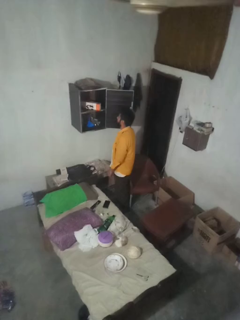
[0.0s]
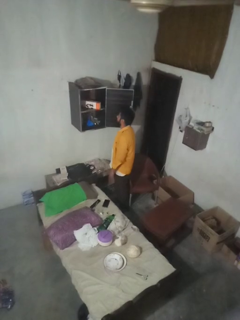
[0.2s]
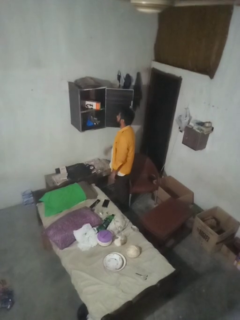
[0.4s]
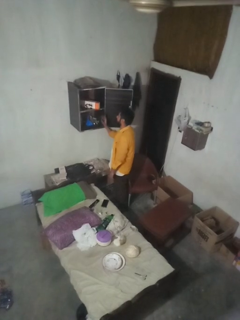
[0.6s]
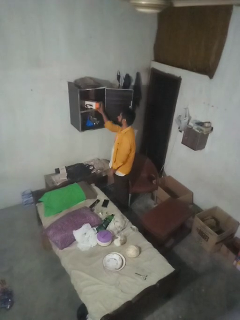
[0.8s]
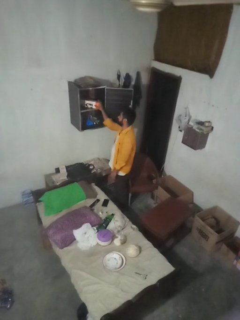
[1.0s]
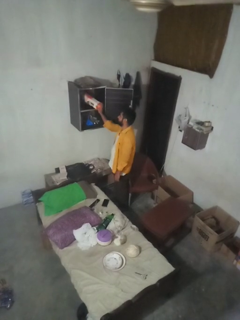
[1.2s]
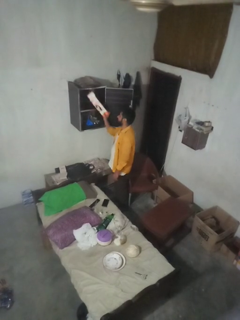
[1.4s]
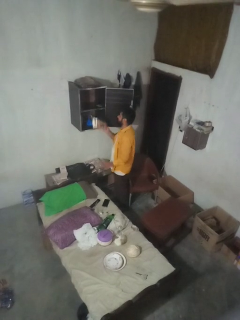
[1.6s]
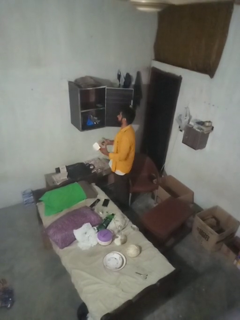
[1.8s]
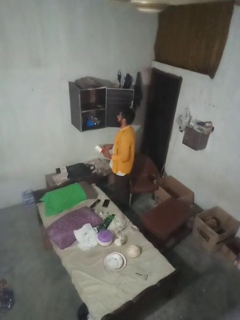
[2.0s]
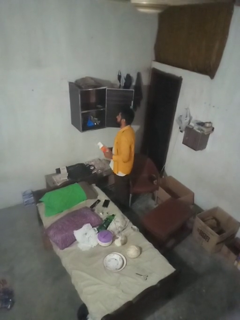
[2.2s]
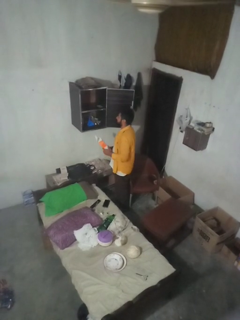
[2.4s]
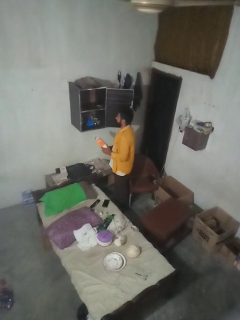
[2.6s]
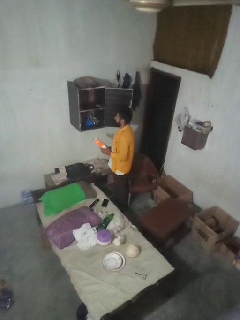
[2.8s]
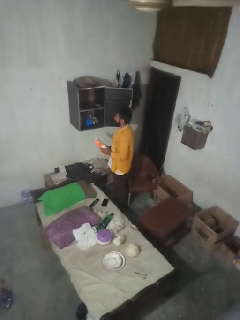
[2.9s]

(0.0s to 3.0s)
person picks up object from cabinet

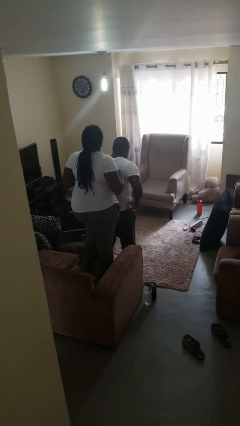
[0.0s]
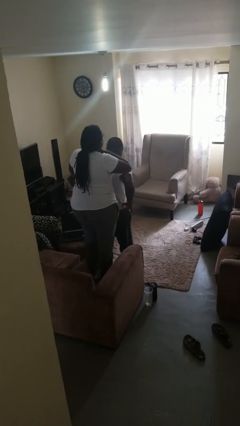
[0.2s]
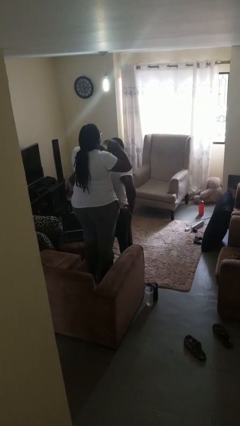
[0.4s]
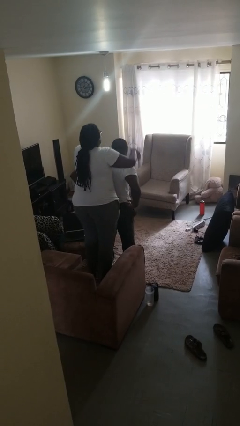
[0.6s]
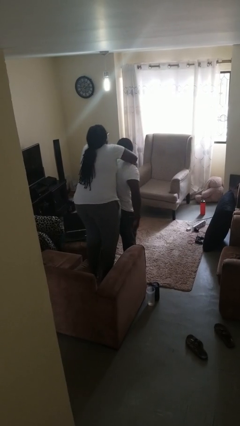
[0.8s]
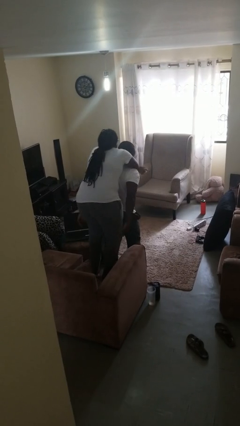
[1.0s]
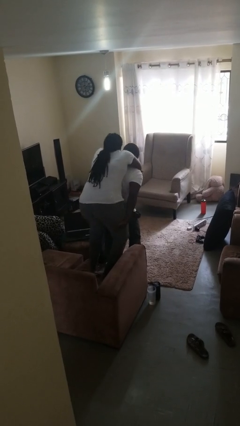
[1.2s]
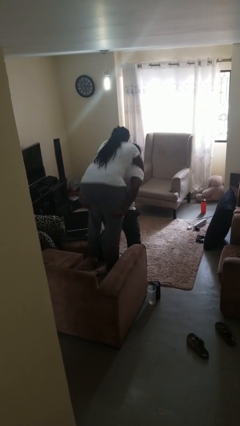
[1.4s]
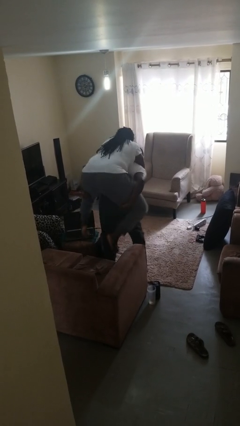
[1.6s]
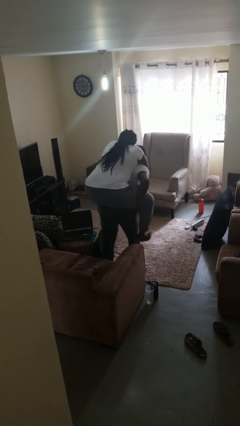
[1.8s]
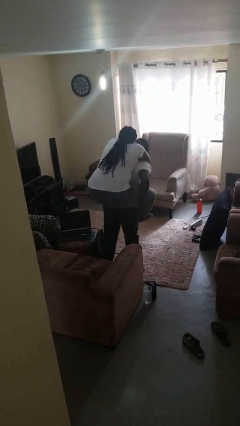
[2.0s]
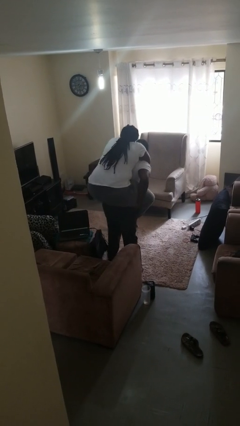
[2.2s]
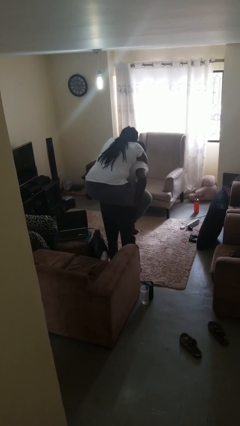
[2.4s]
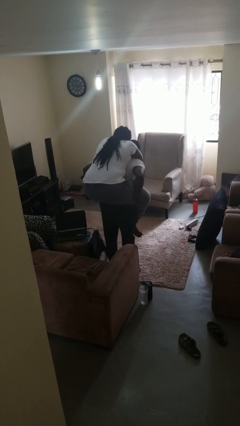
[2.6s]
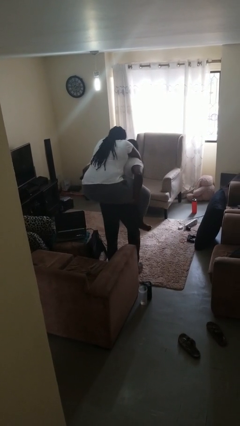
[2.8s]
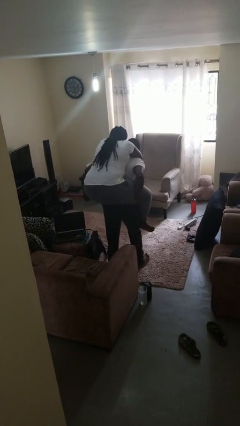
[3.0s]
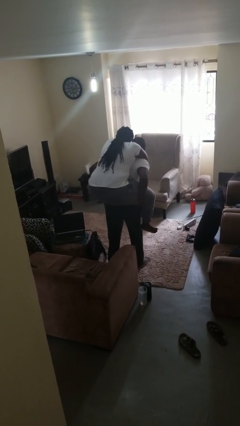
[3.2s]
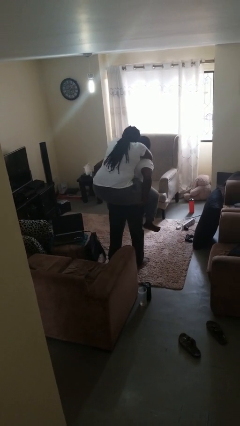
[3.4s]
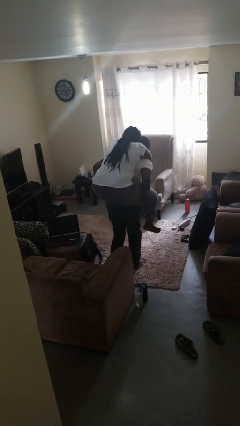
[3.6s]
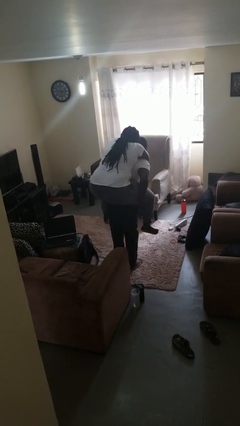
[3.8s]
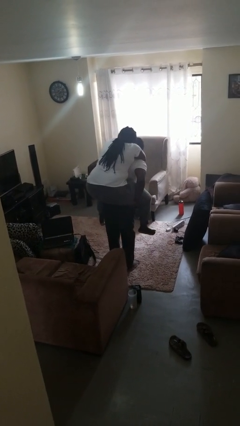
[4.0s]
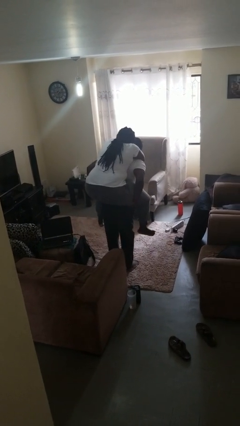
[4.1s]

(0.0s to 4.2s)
person carries person on back

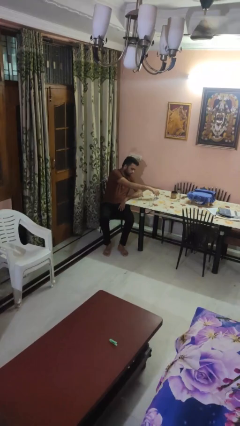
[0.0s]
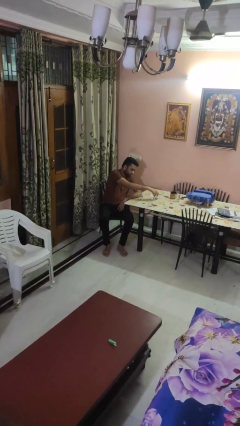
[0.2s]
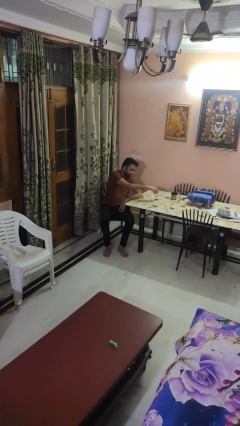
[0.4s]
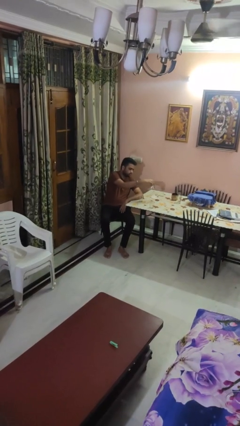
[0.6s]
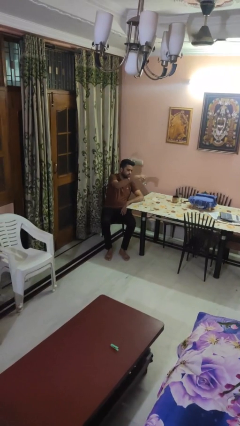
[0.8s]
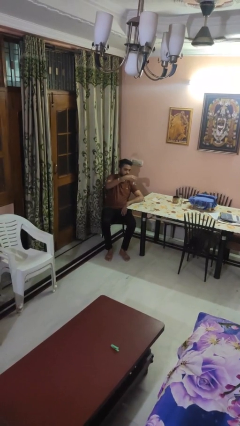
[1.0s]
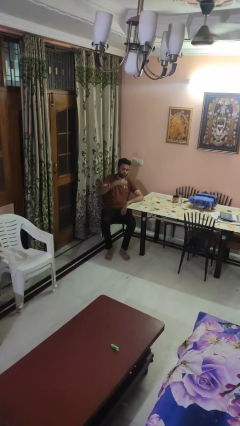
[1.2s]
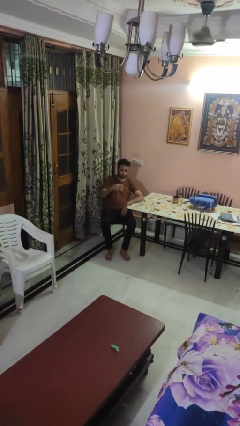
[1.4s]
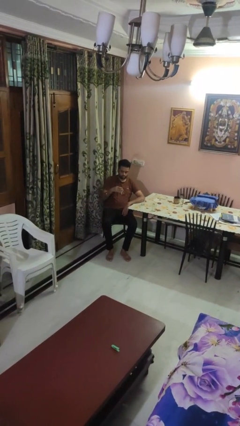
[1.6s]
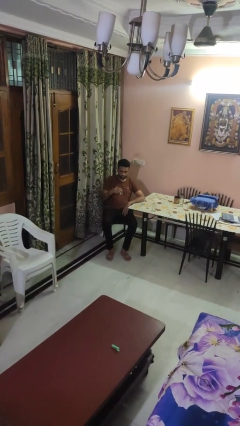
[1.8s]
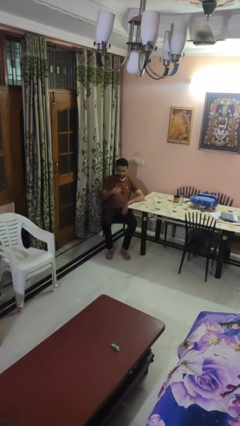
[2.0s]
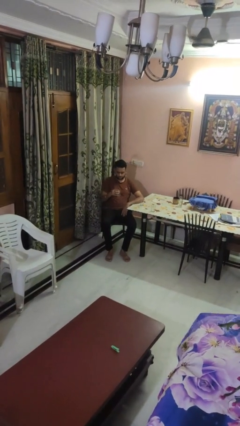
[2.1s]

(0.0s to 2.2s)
person picks up object from table

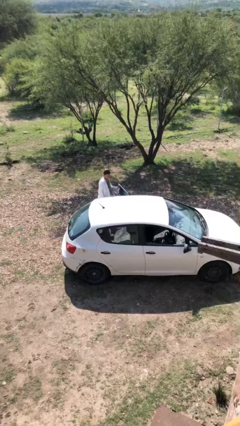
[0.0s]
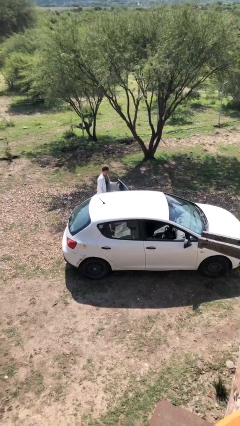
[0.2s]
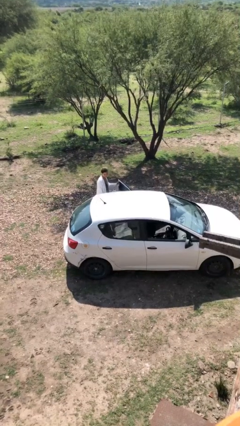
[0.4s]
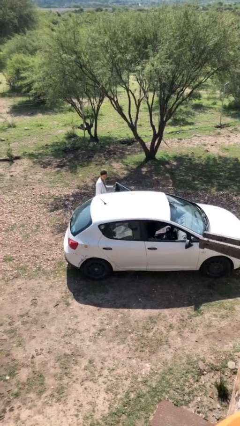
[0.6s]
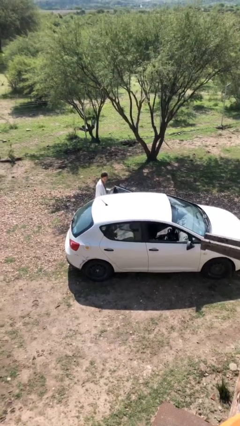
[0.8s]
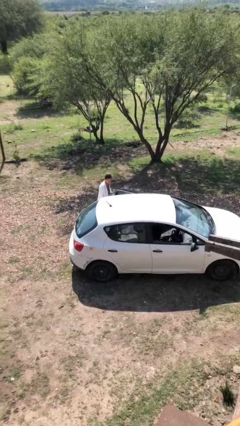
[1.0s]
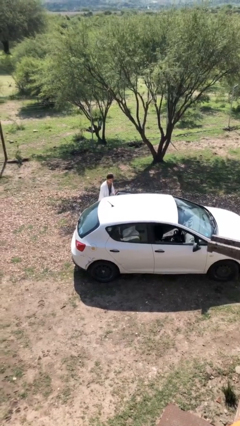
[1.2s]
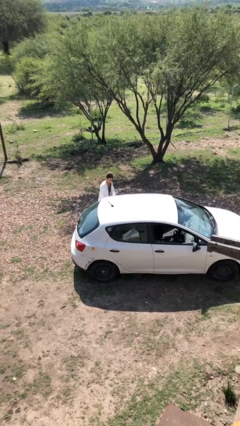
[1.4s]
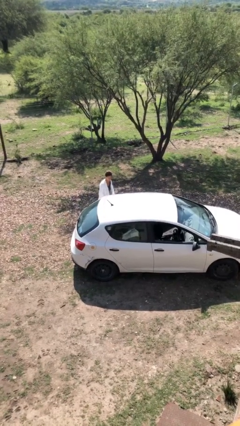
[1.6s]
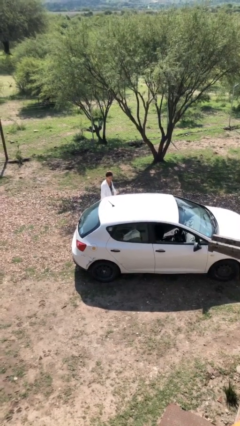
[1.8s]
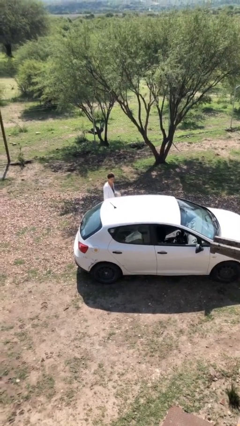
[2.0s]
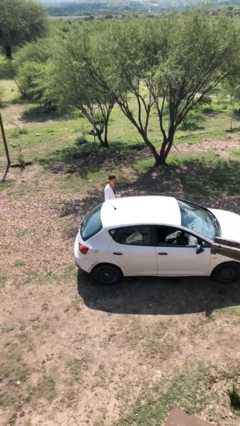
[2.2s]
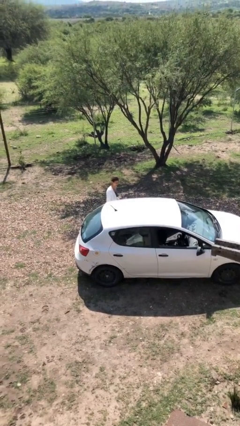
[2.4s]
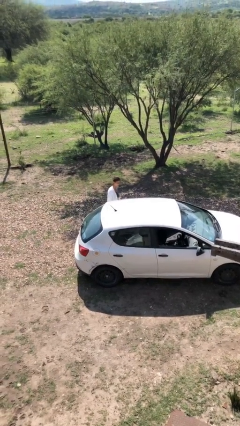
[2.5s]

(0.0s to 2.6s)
person closes car door

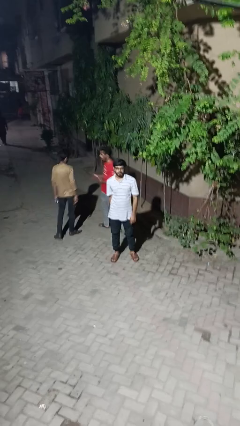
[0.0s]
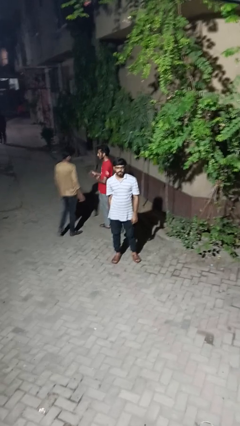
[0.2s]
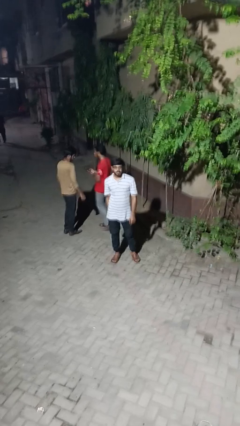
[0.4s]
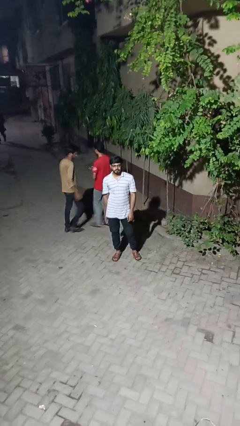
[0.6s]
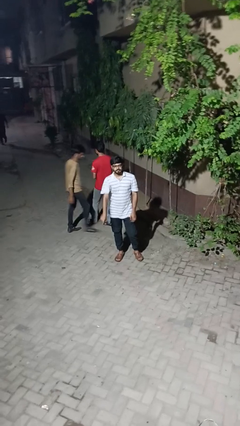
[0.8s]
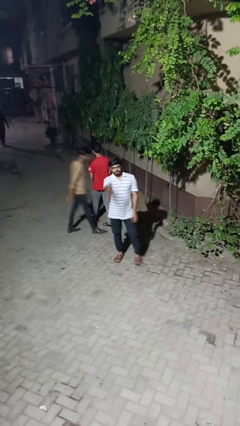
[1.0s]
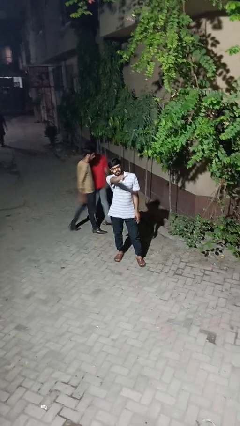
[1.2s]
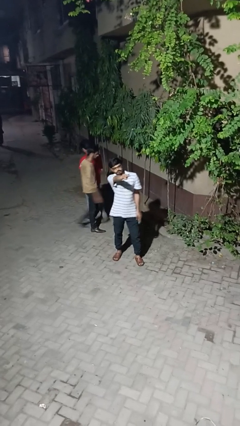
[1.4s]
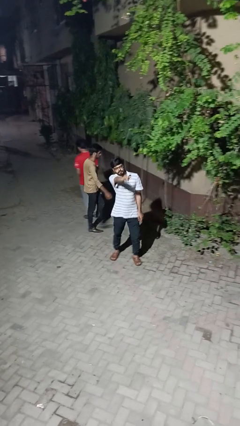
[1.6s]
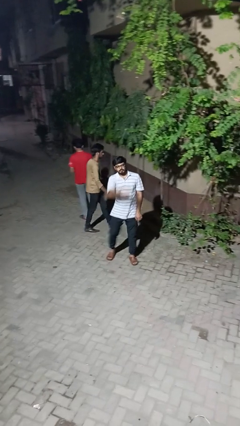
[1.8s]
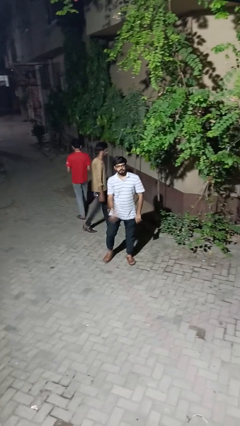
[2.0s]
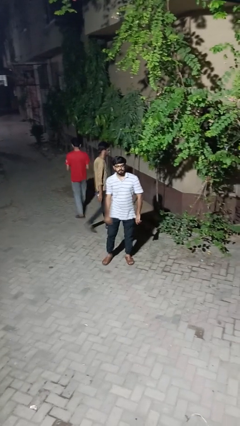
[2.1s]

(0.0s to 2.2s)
person points at person

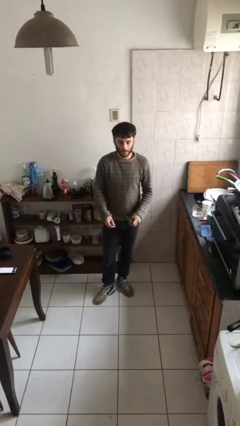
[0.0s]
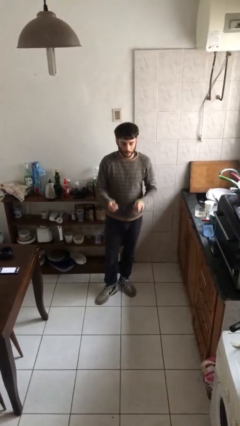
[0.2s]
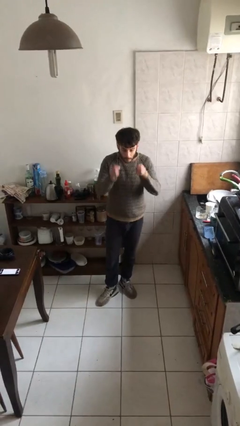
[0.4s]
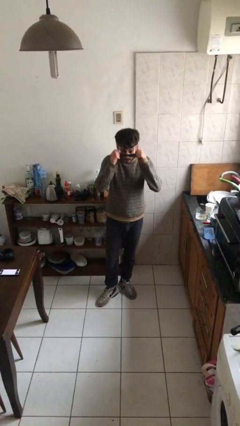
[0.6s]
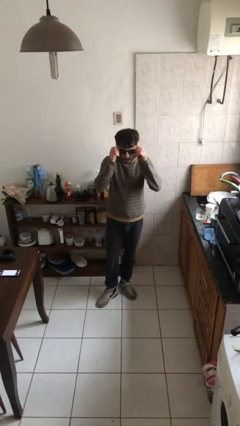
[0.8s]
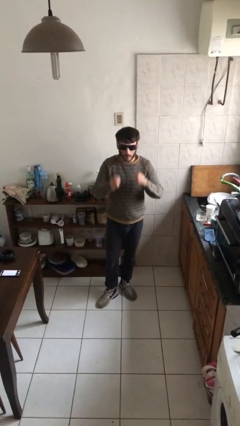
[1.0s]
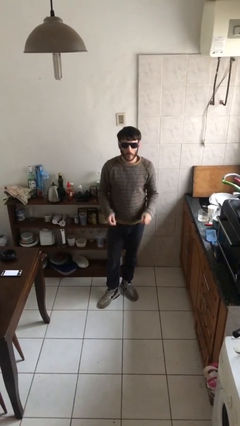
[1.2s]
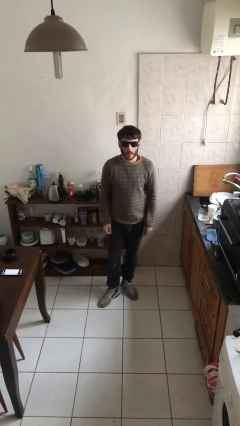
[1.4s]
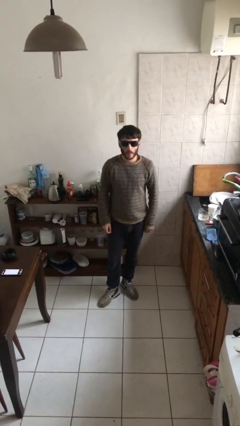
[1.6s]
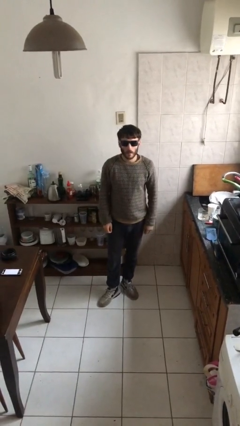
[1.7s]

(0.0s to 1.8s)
person puts on sunglasses

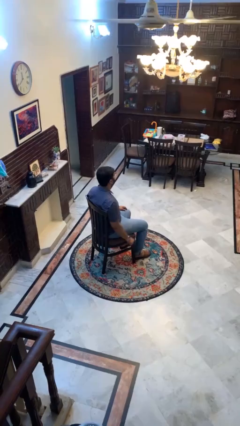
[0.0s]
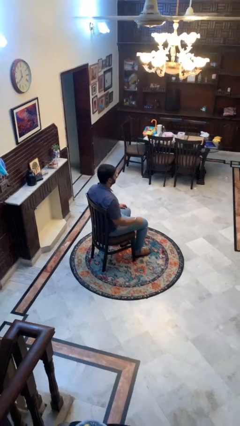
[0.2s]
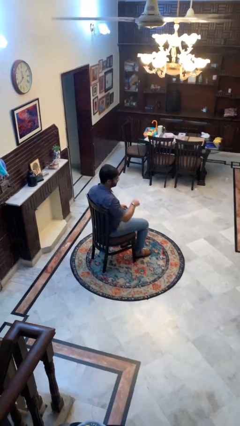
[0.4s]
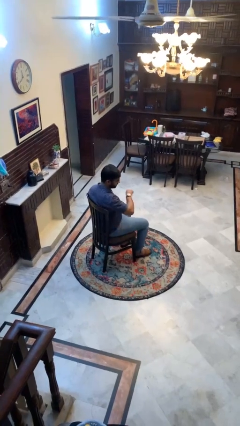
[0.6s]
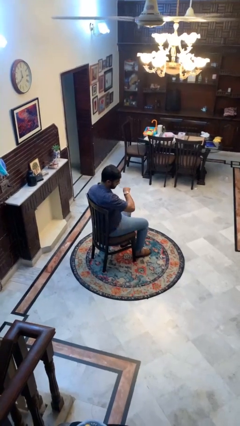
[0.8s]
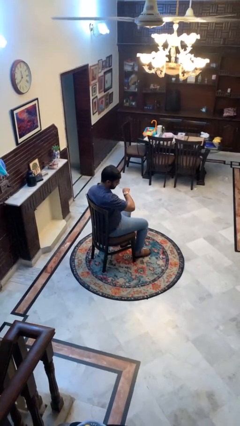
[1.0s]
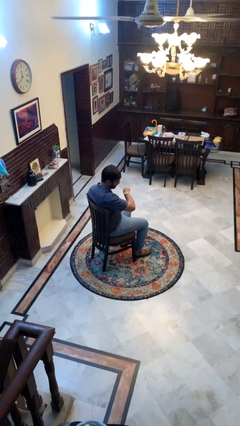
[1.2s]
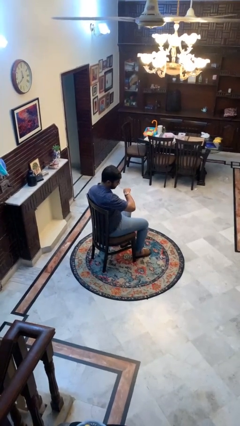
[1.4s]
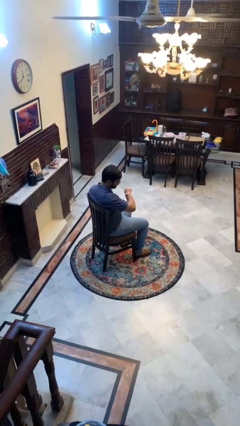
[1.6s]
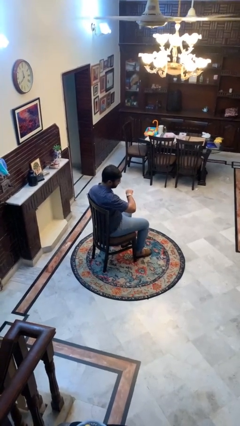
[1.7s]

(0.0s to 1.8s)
person looks at wristwatch
